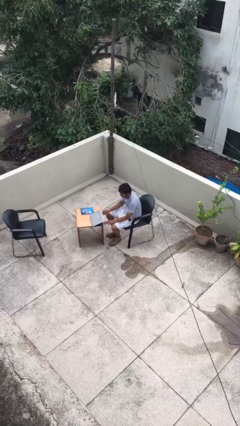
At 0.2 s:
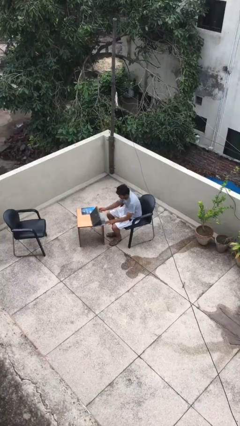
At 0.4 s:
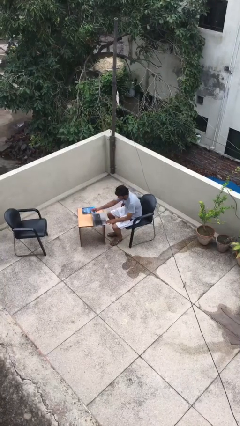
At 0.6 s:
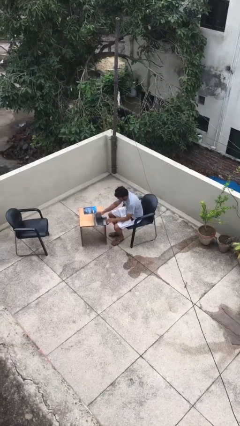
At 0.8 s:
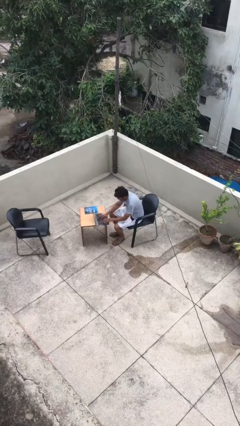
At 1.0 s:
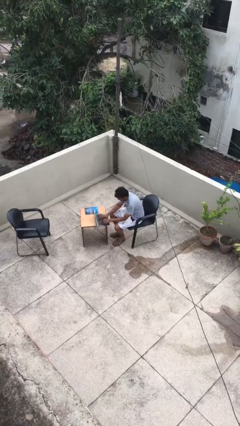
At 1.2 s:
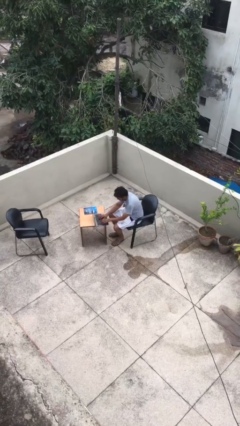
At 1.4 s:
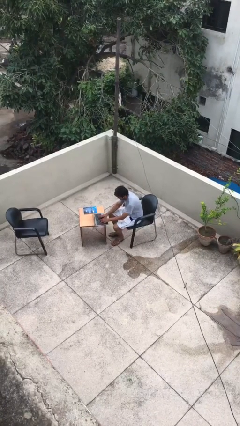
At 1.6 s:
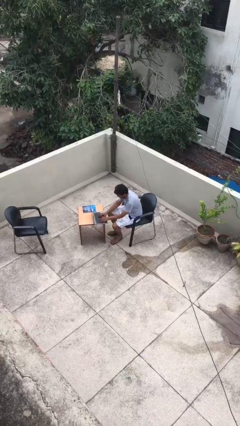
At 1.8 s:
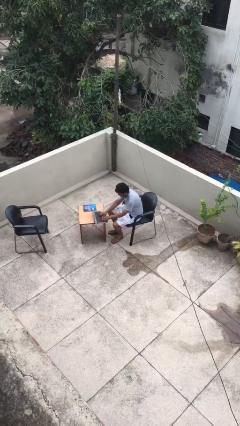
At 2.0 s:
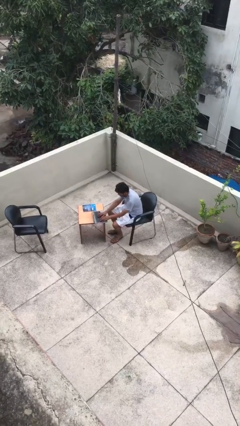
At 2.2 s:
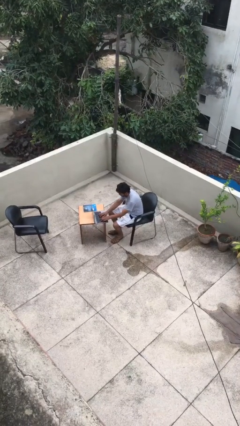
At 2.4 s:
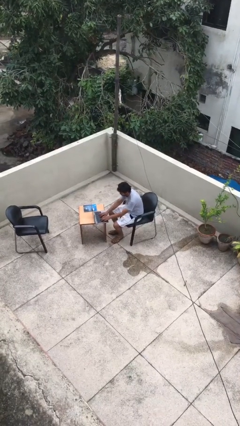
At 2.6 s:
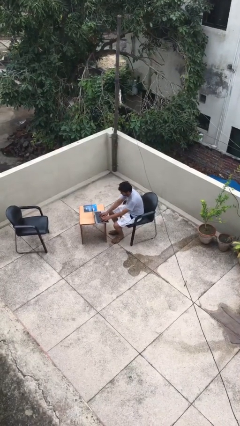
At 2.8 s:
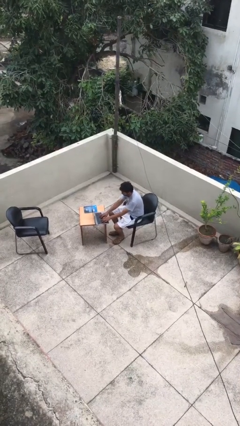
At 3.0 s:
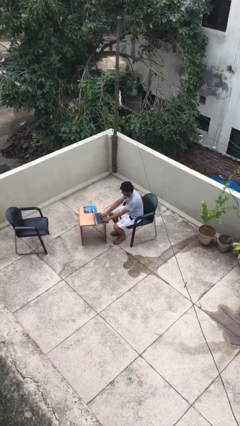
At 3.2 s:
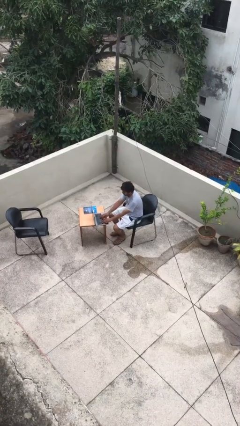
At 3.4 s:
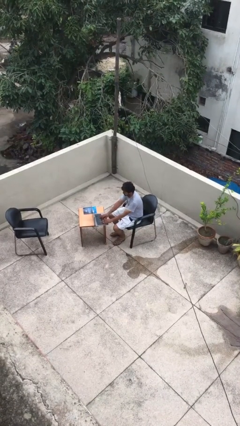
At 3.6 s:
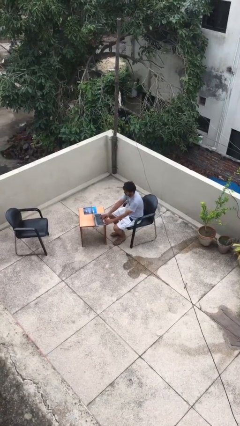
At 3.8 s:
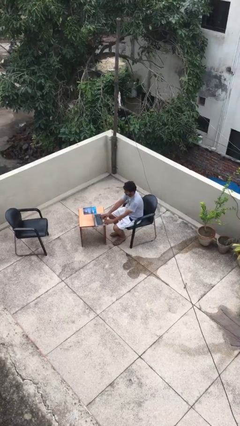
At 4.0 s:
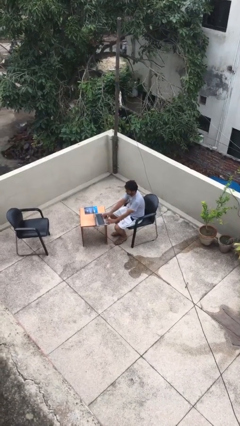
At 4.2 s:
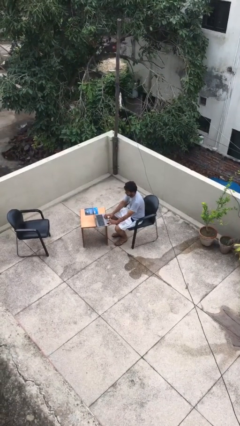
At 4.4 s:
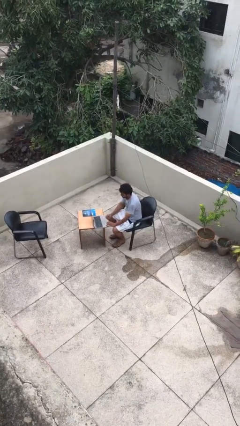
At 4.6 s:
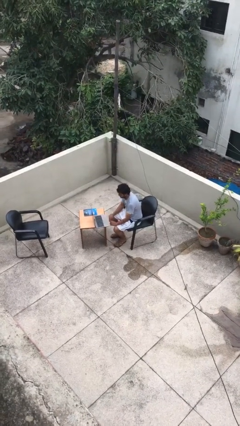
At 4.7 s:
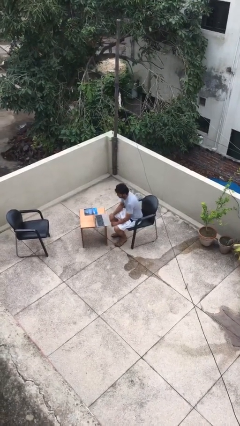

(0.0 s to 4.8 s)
person interacts with laptop

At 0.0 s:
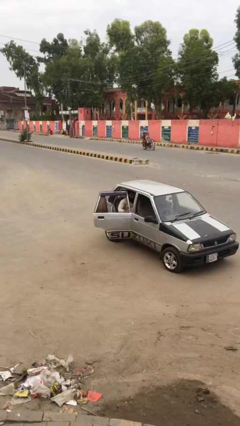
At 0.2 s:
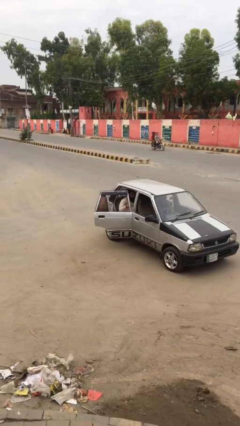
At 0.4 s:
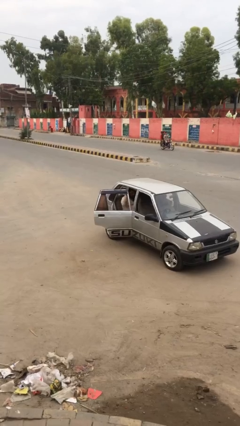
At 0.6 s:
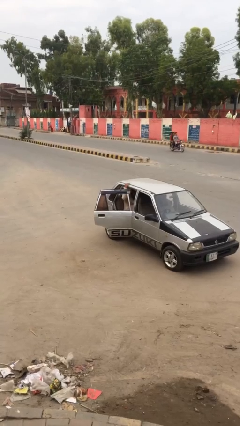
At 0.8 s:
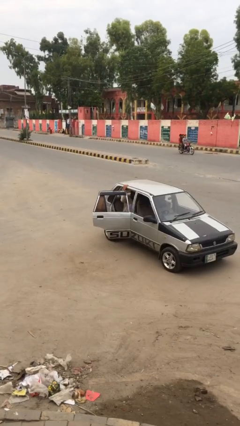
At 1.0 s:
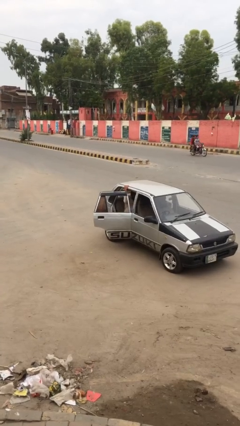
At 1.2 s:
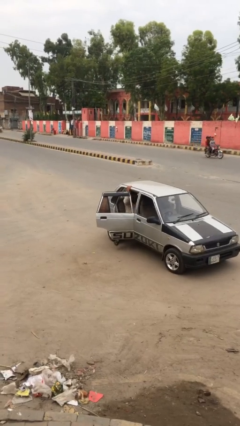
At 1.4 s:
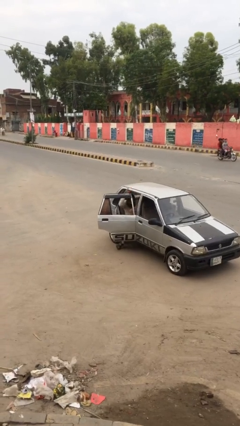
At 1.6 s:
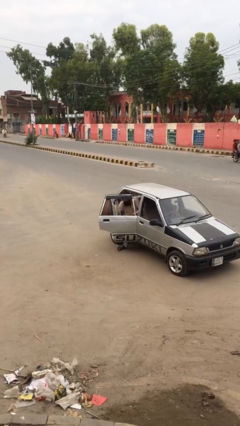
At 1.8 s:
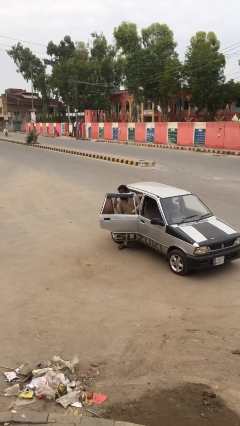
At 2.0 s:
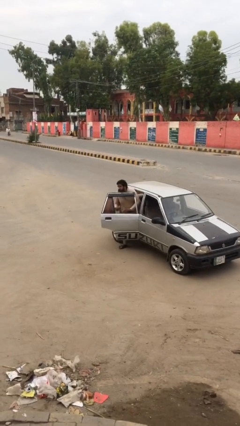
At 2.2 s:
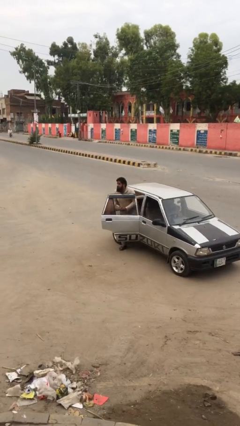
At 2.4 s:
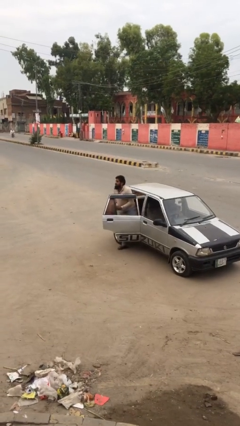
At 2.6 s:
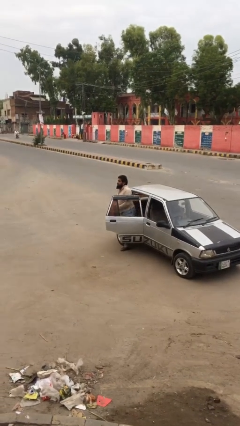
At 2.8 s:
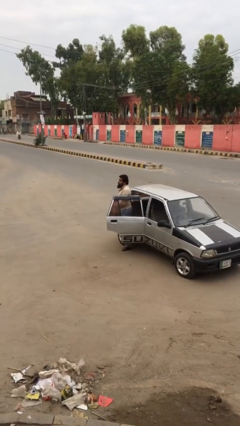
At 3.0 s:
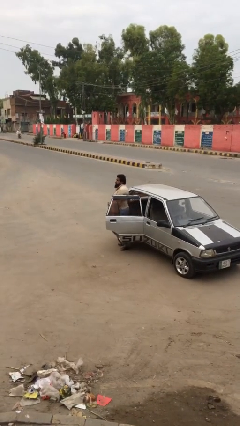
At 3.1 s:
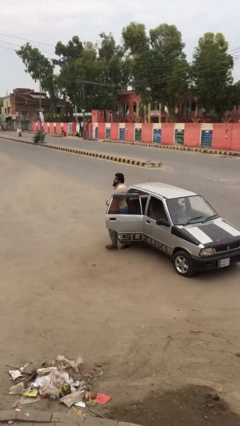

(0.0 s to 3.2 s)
person exits car

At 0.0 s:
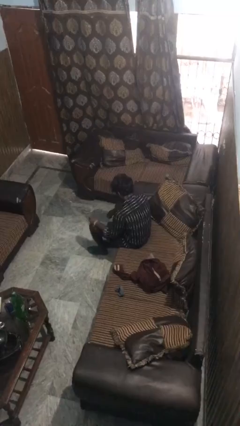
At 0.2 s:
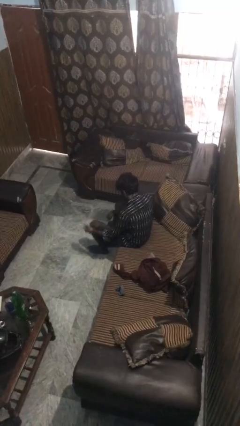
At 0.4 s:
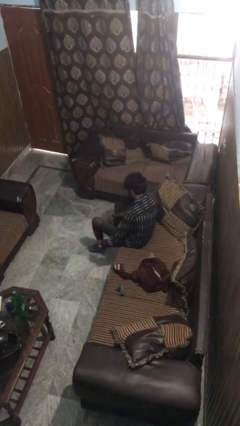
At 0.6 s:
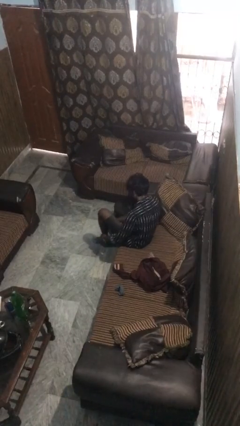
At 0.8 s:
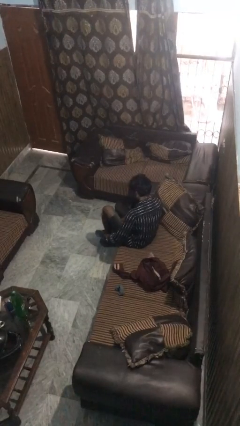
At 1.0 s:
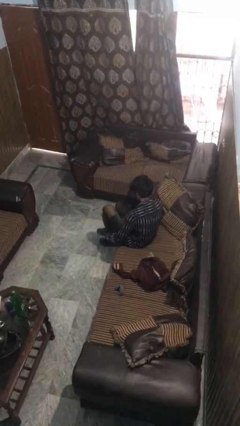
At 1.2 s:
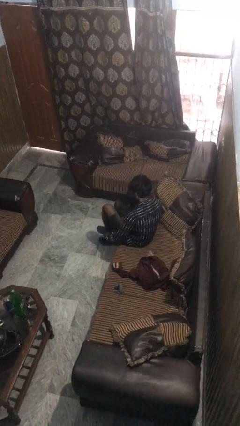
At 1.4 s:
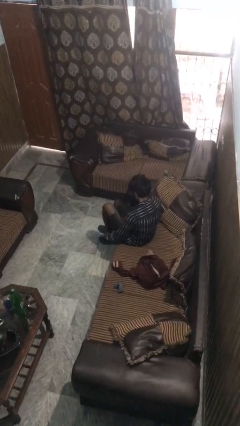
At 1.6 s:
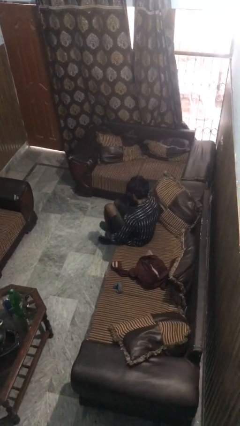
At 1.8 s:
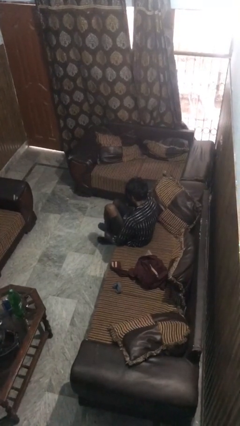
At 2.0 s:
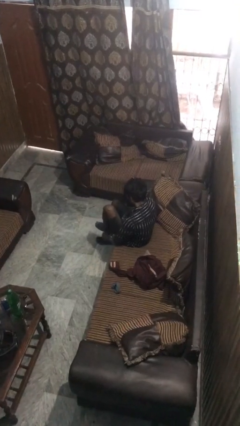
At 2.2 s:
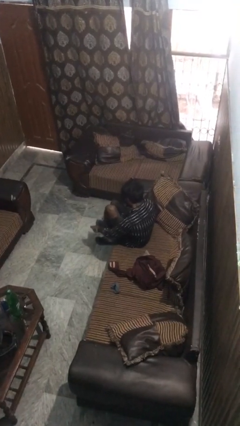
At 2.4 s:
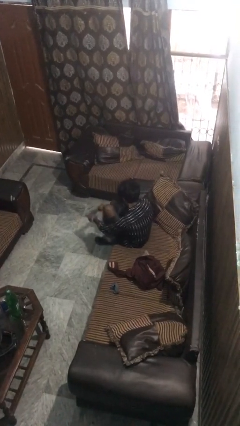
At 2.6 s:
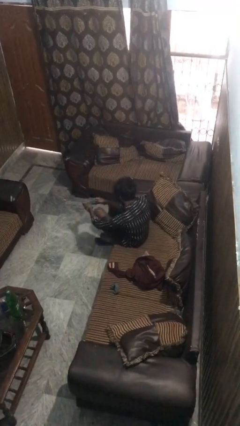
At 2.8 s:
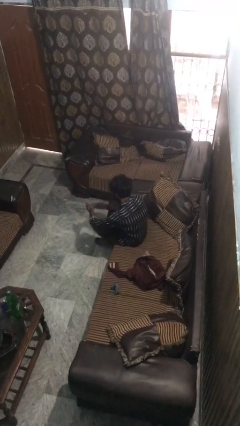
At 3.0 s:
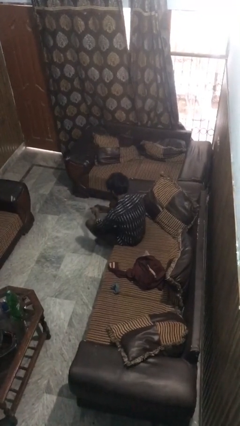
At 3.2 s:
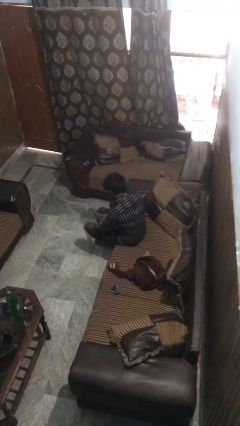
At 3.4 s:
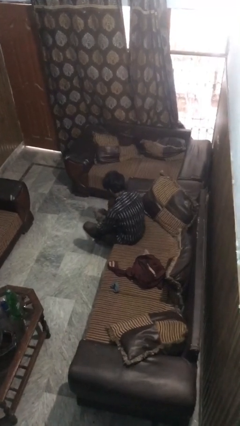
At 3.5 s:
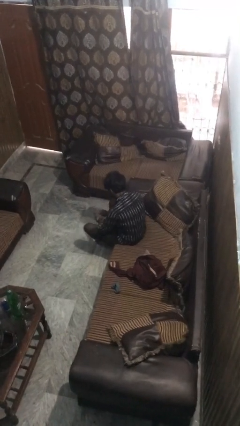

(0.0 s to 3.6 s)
person takes off socks

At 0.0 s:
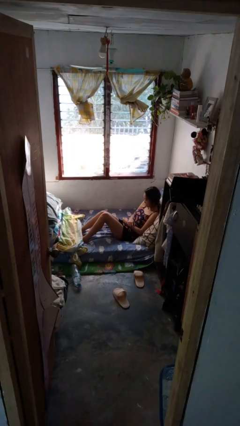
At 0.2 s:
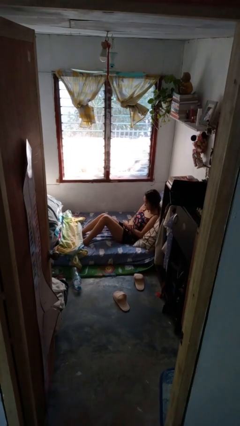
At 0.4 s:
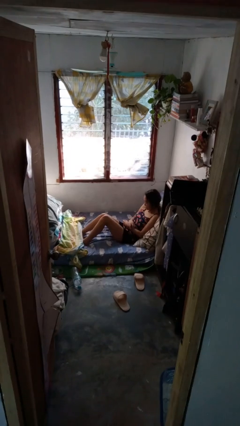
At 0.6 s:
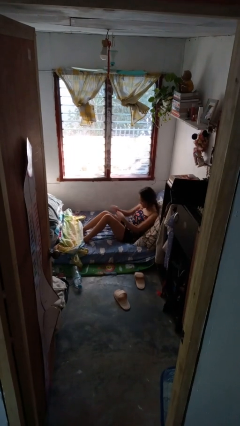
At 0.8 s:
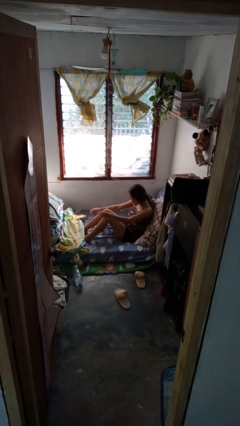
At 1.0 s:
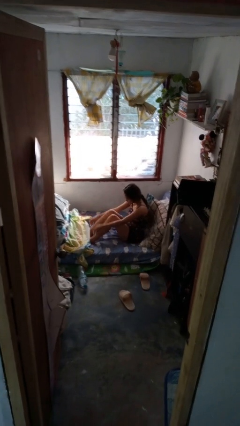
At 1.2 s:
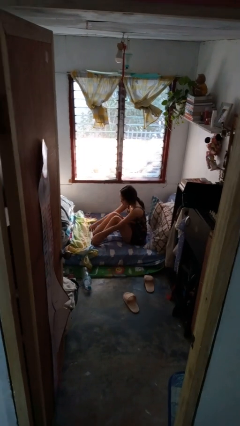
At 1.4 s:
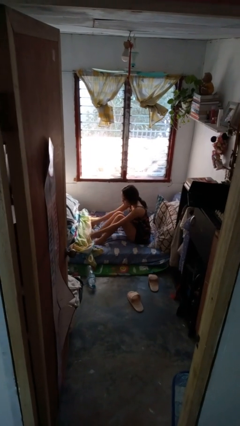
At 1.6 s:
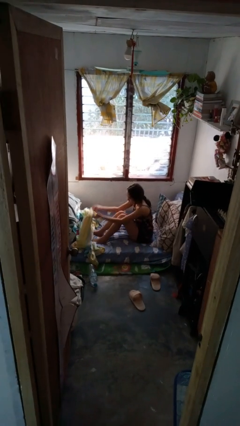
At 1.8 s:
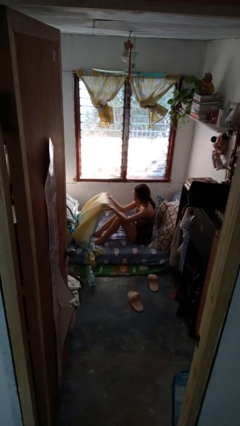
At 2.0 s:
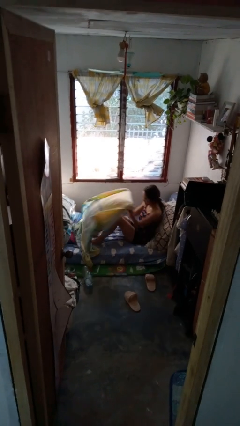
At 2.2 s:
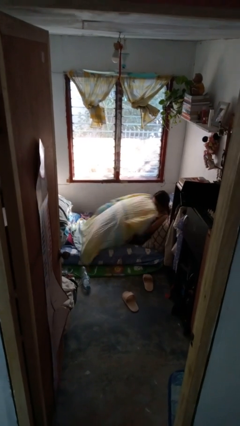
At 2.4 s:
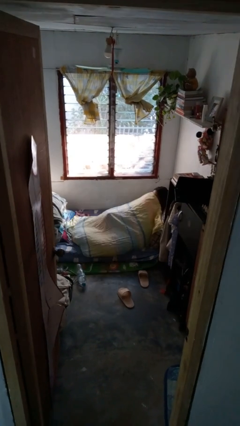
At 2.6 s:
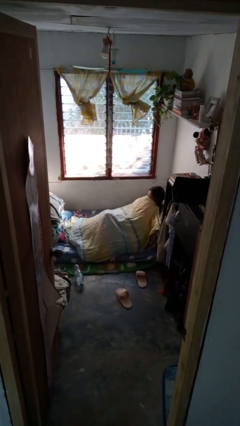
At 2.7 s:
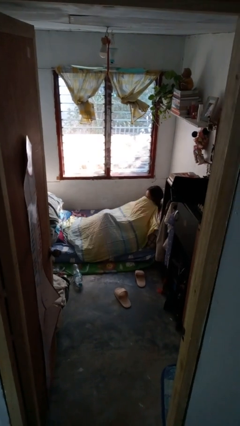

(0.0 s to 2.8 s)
person covers with bedsheets

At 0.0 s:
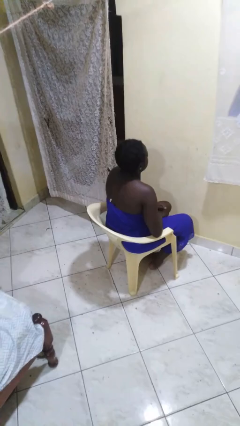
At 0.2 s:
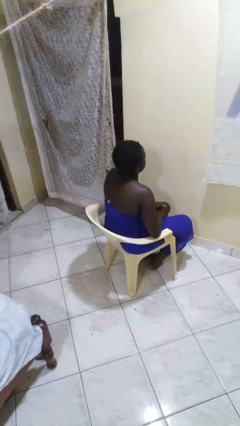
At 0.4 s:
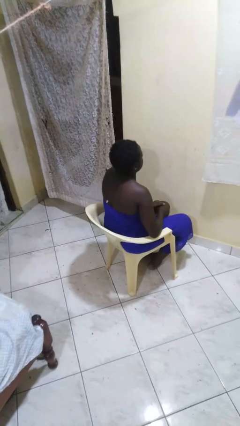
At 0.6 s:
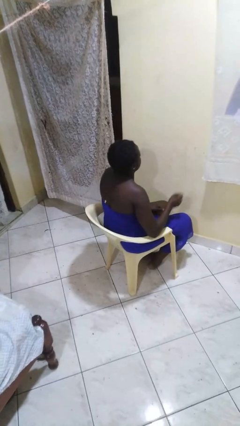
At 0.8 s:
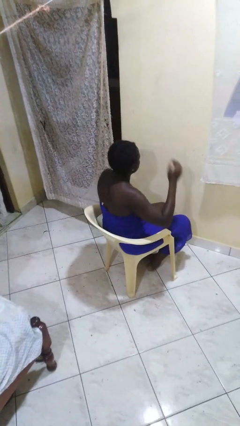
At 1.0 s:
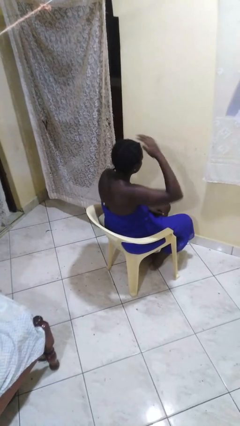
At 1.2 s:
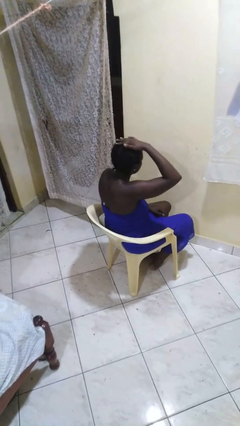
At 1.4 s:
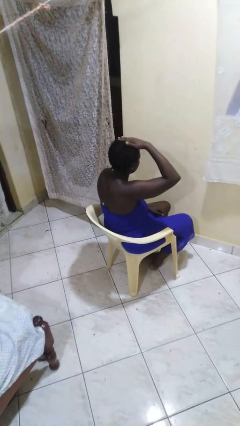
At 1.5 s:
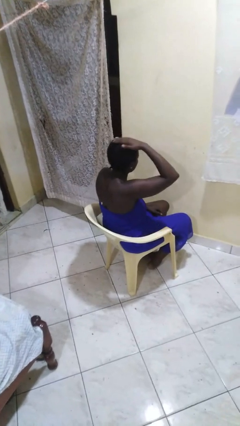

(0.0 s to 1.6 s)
person pats head

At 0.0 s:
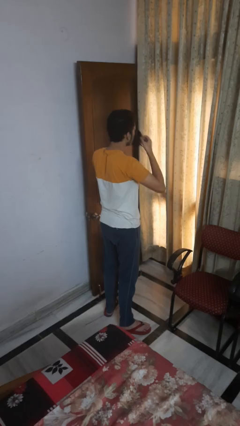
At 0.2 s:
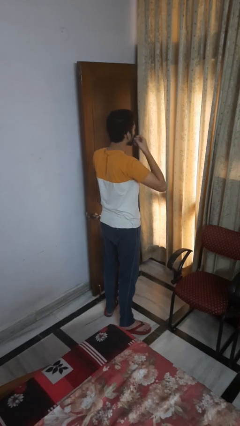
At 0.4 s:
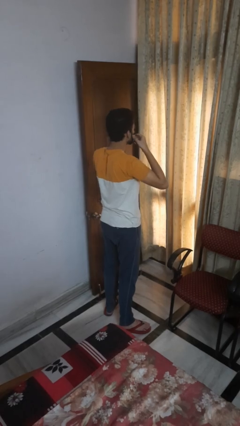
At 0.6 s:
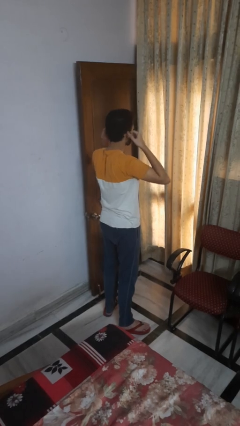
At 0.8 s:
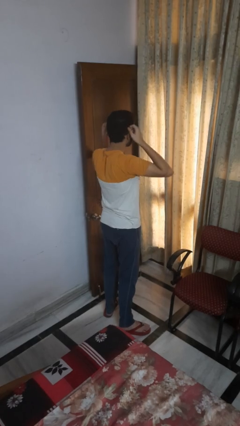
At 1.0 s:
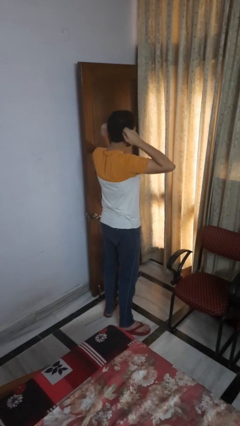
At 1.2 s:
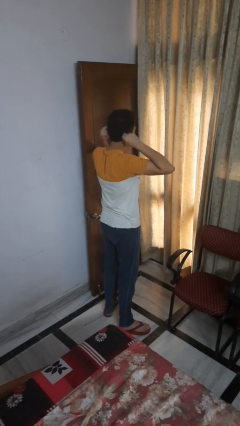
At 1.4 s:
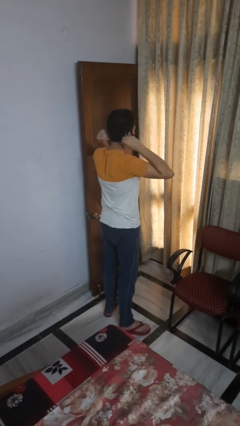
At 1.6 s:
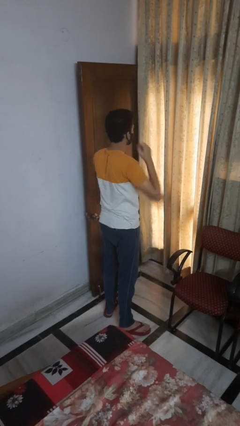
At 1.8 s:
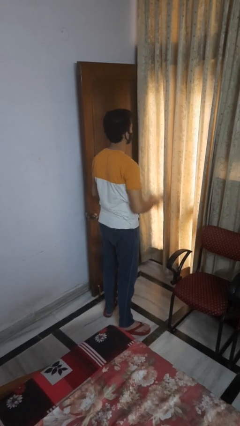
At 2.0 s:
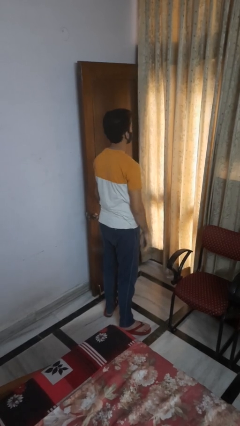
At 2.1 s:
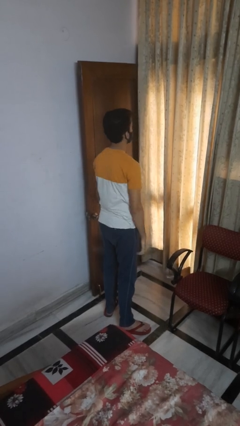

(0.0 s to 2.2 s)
person puts on facemask
